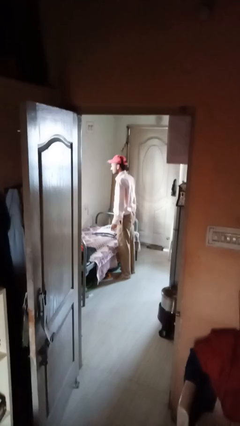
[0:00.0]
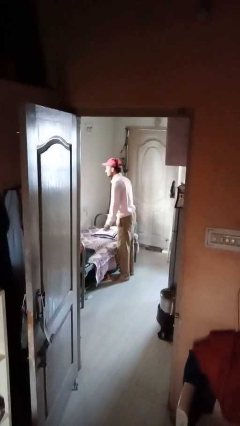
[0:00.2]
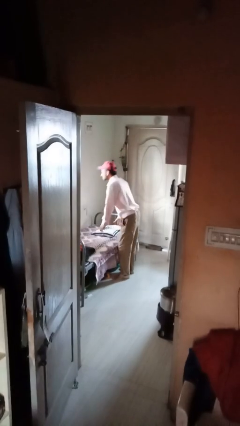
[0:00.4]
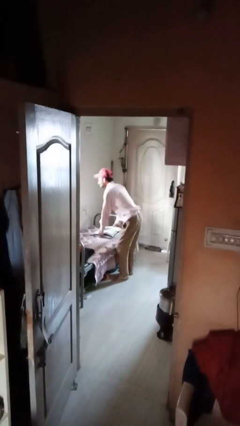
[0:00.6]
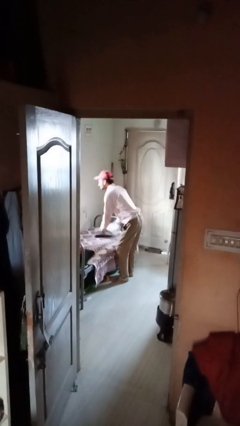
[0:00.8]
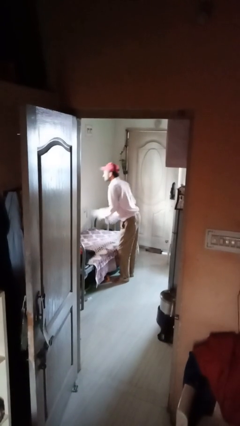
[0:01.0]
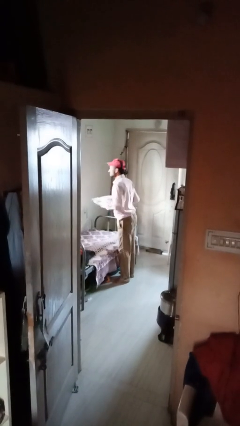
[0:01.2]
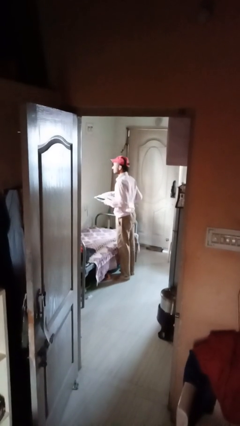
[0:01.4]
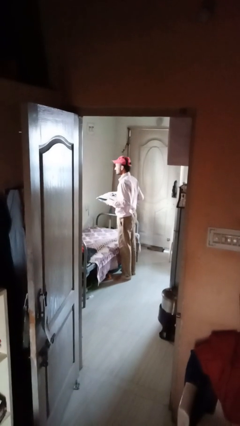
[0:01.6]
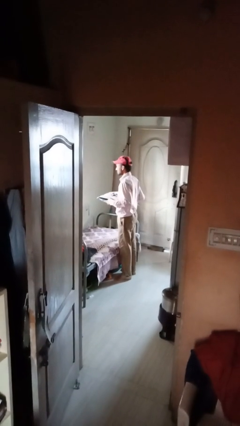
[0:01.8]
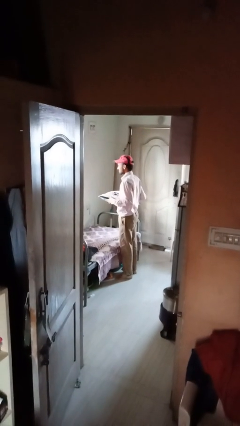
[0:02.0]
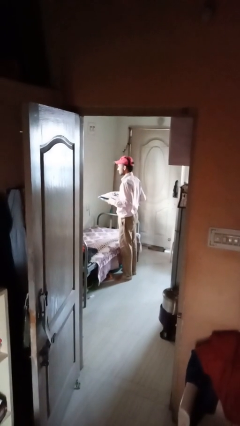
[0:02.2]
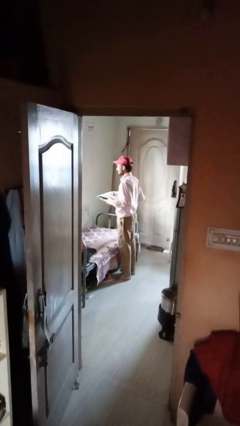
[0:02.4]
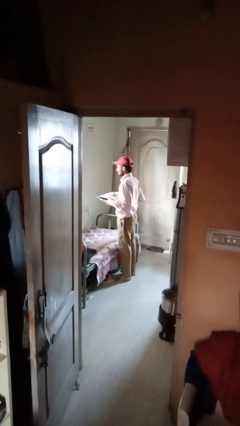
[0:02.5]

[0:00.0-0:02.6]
person picks up object from bed

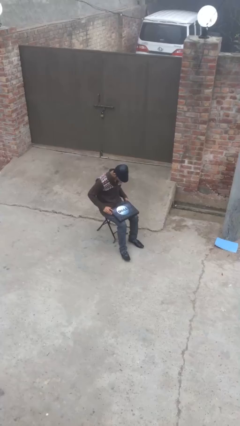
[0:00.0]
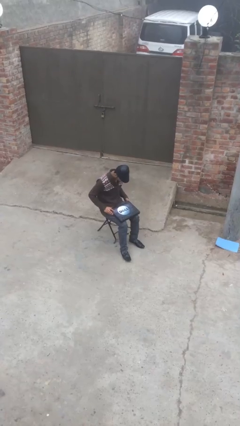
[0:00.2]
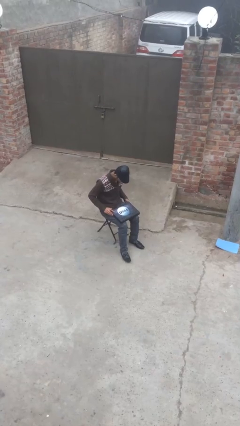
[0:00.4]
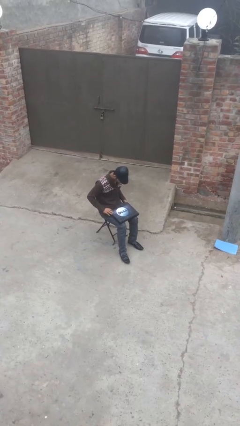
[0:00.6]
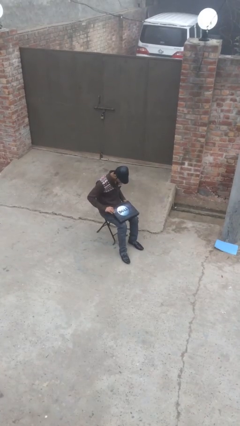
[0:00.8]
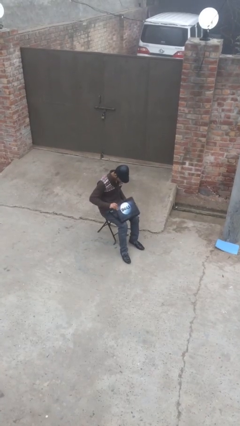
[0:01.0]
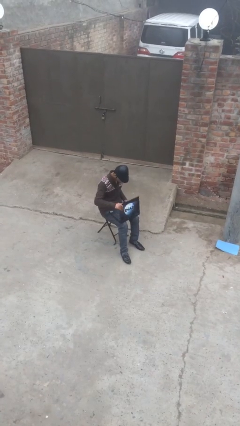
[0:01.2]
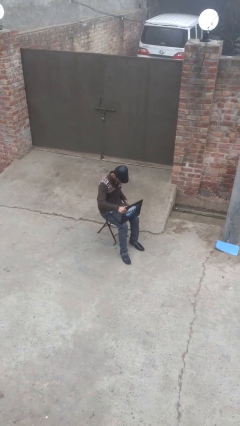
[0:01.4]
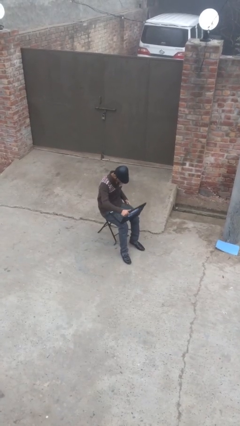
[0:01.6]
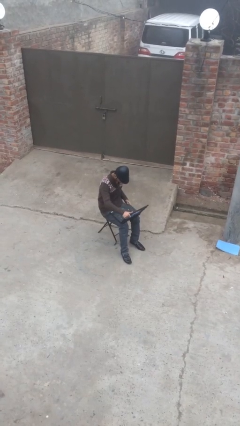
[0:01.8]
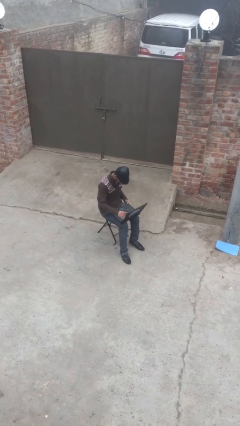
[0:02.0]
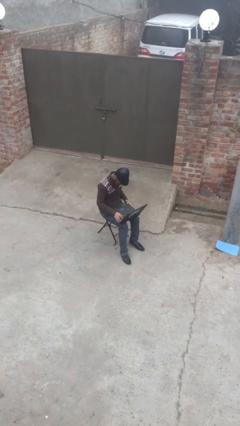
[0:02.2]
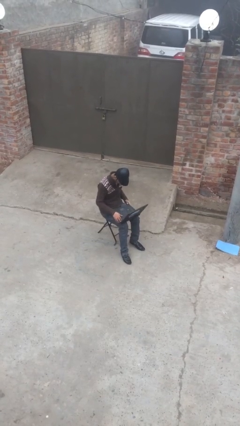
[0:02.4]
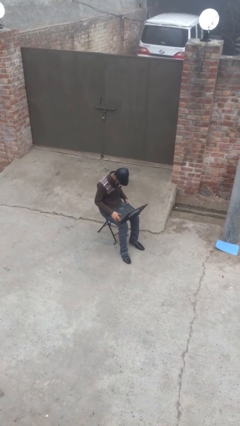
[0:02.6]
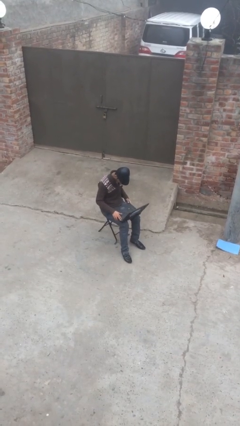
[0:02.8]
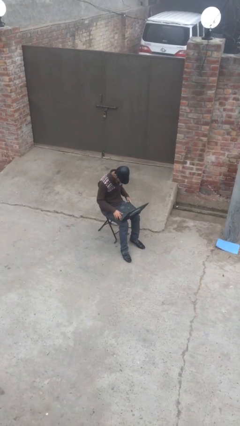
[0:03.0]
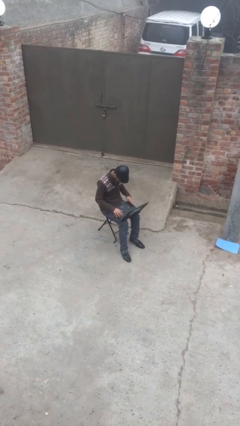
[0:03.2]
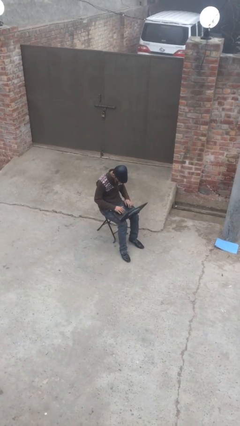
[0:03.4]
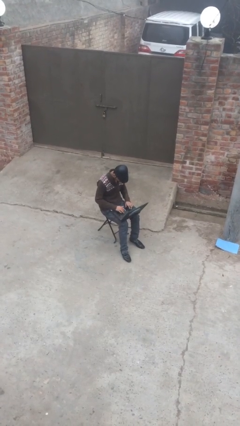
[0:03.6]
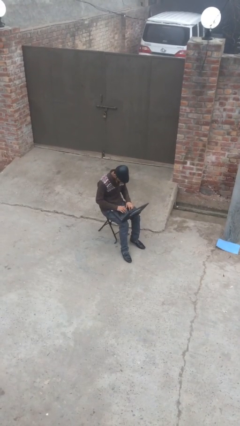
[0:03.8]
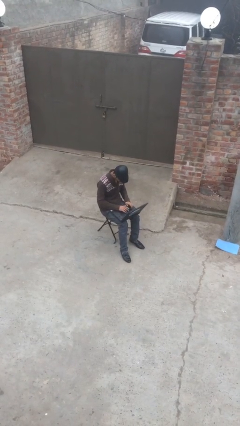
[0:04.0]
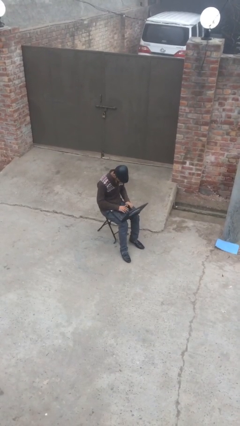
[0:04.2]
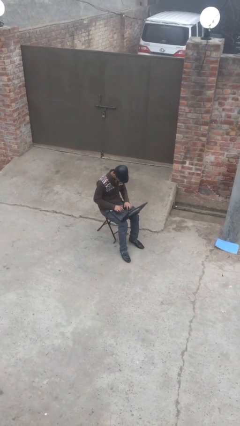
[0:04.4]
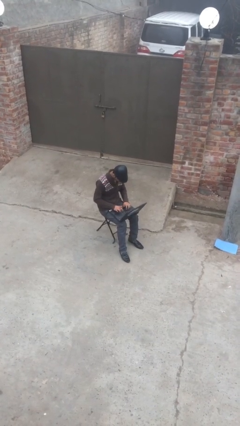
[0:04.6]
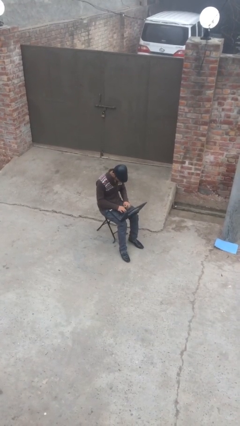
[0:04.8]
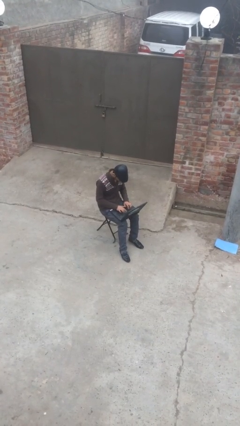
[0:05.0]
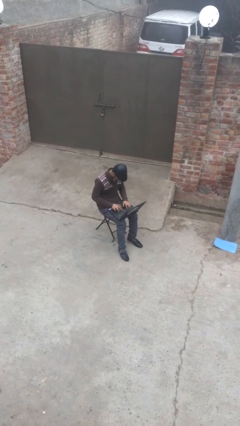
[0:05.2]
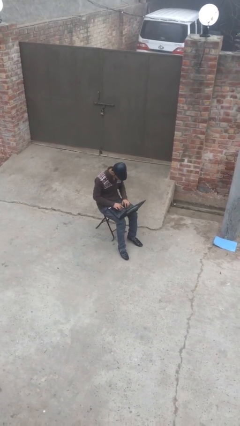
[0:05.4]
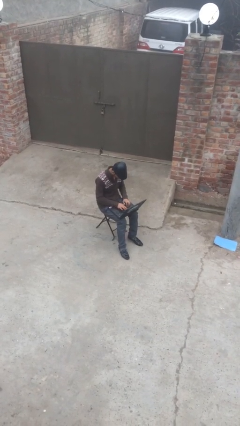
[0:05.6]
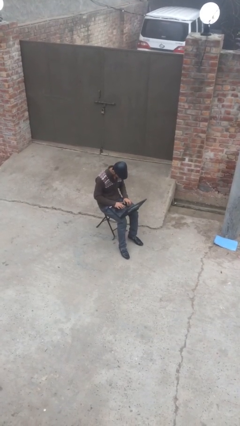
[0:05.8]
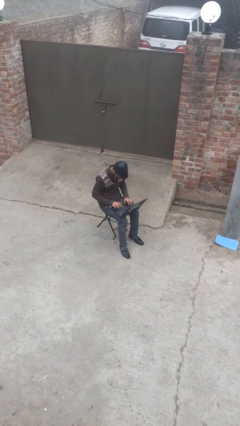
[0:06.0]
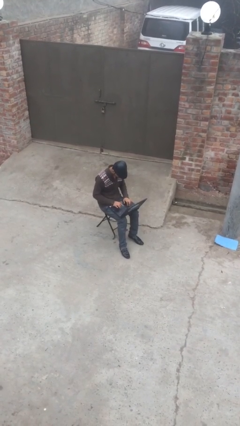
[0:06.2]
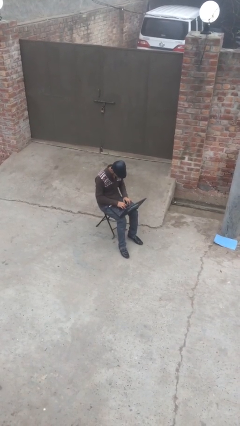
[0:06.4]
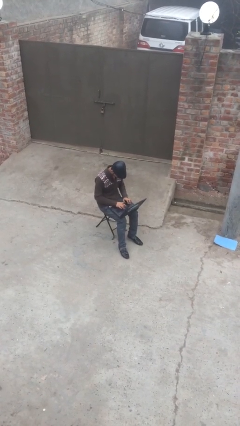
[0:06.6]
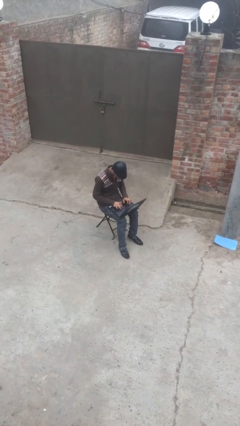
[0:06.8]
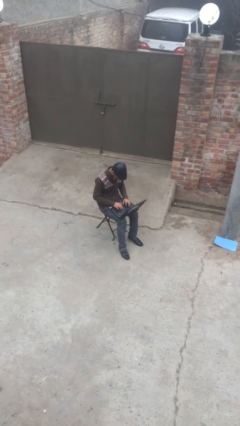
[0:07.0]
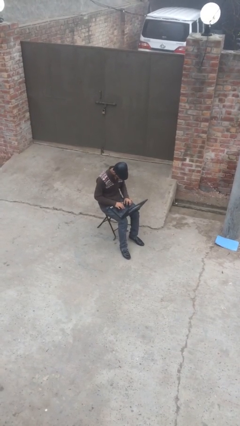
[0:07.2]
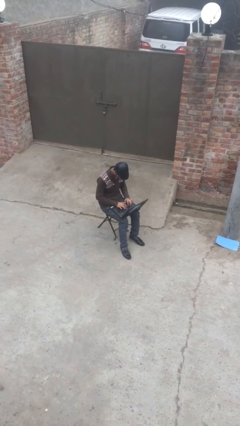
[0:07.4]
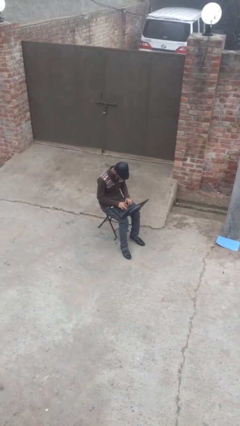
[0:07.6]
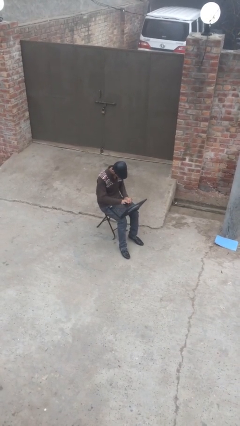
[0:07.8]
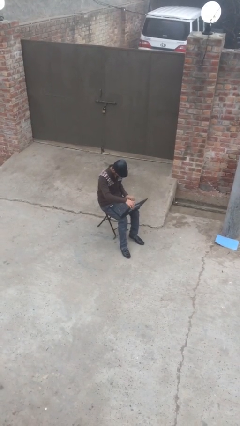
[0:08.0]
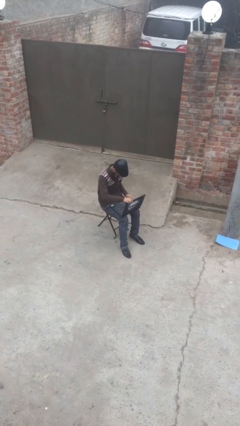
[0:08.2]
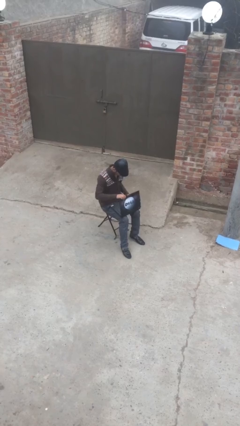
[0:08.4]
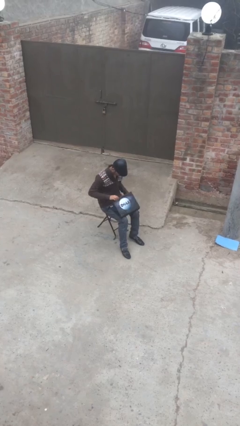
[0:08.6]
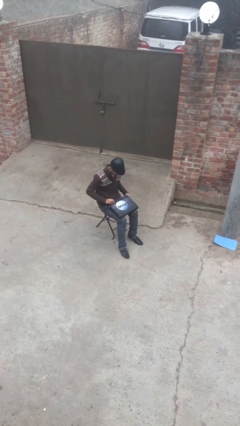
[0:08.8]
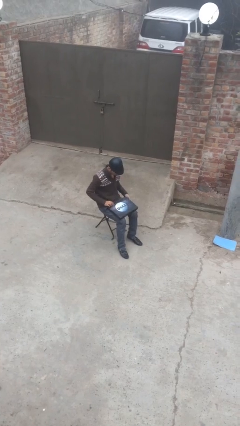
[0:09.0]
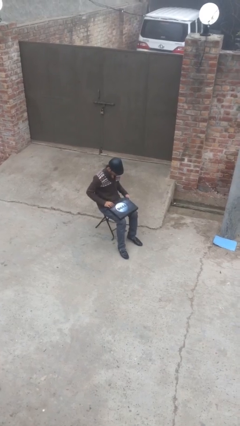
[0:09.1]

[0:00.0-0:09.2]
person interacts with laptop

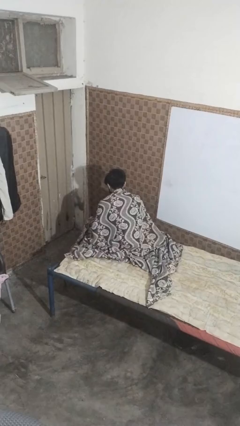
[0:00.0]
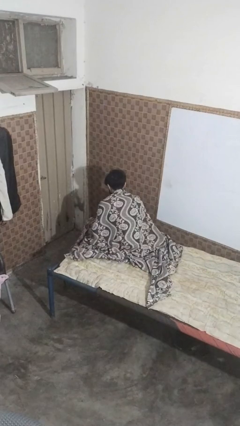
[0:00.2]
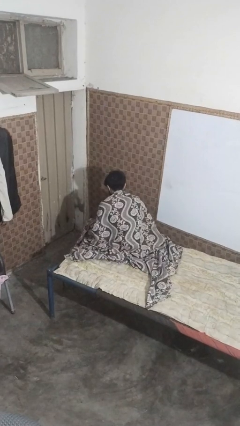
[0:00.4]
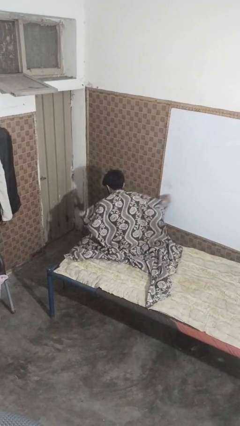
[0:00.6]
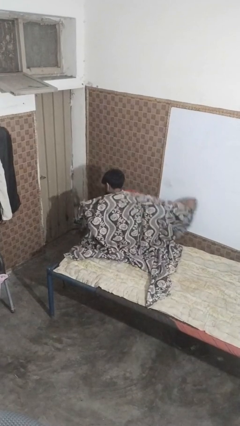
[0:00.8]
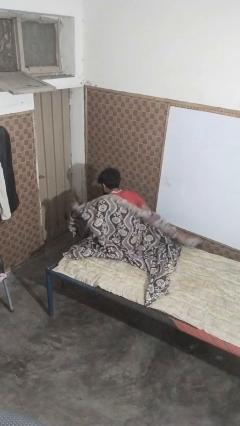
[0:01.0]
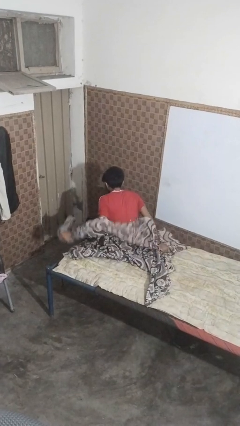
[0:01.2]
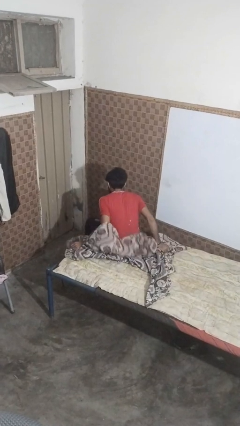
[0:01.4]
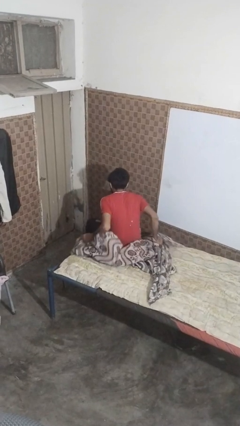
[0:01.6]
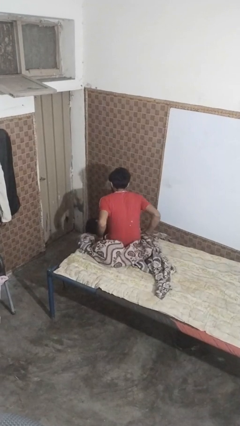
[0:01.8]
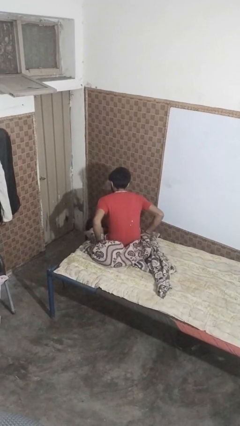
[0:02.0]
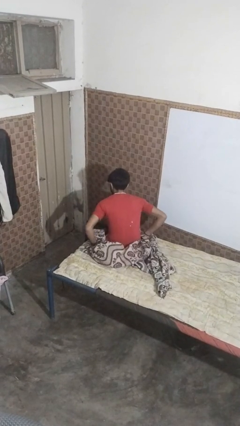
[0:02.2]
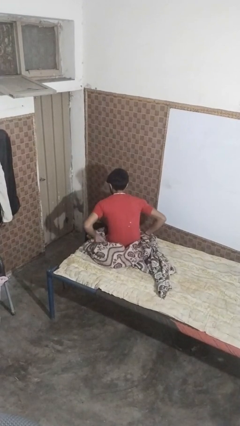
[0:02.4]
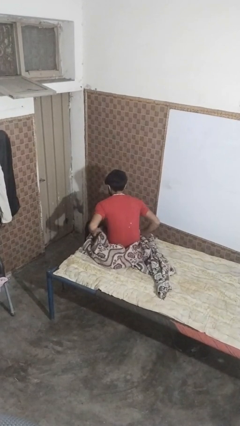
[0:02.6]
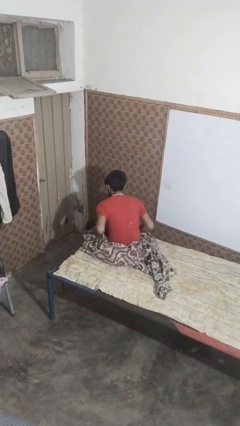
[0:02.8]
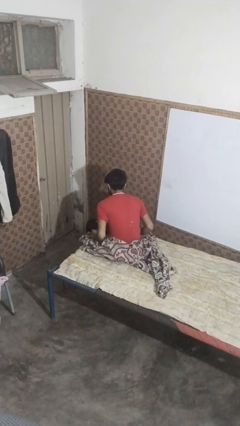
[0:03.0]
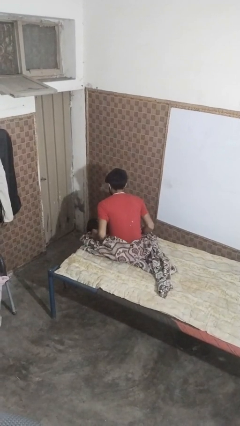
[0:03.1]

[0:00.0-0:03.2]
person uncovers with bedsheets

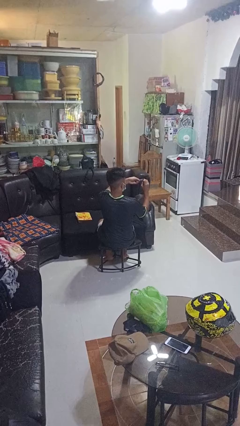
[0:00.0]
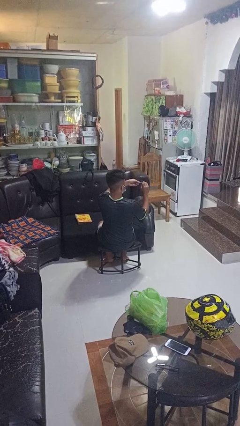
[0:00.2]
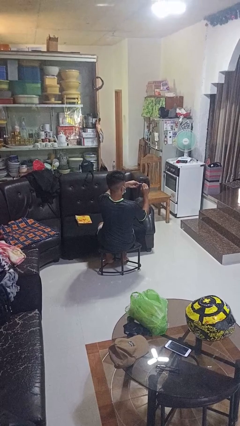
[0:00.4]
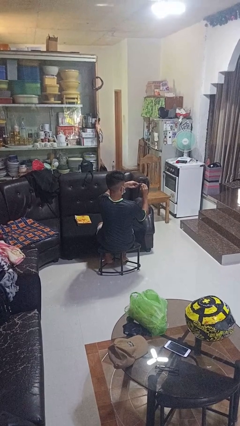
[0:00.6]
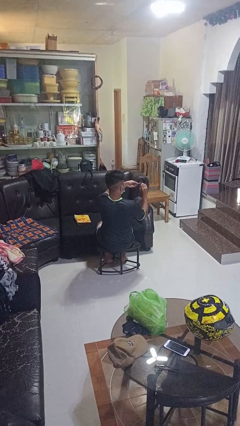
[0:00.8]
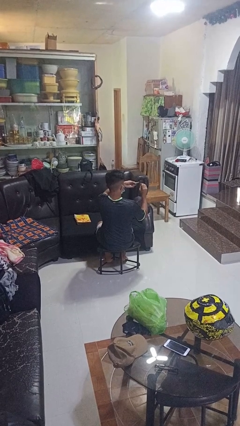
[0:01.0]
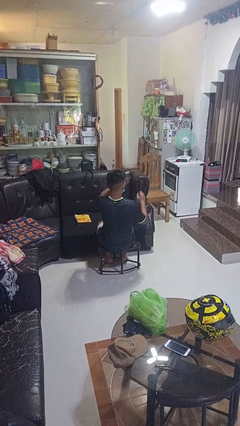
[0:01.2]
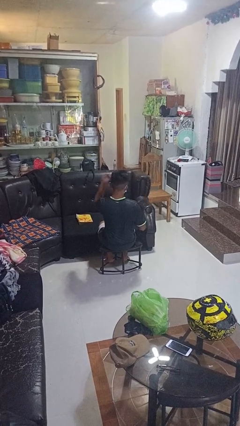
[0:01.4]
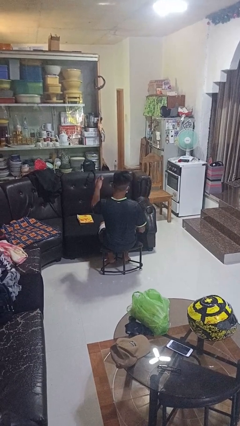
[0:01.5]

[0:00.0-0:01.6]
person clips fingernails

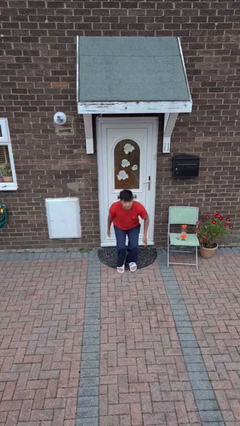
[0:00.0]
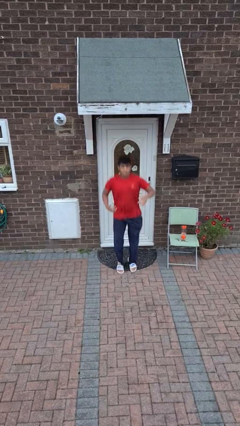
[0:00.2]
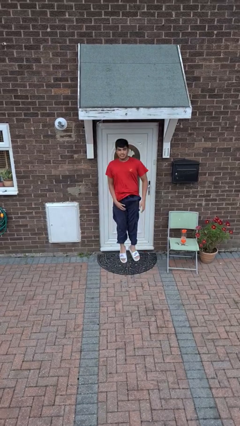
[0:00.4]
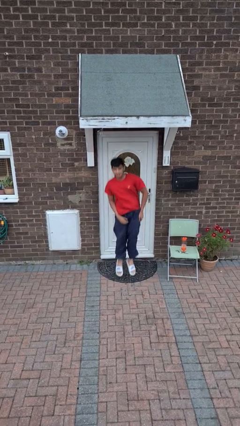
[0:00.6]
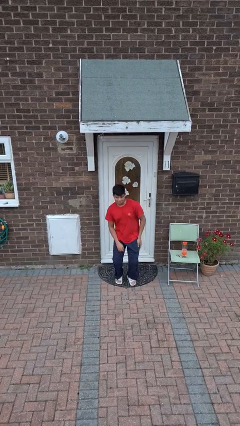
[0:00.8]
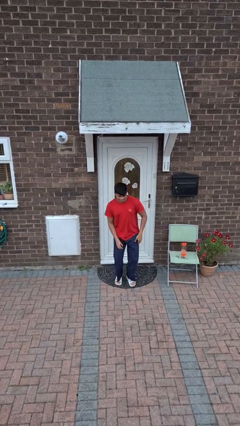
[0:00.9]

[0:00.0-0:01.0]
person jumps

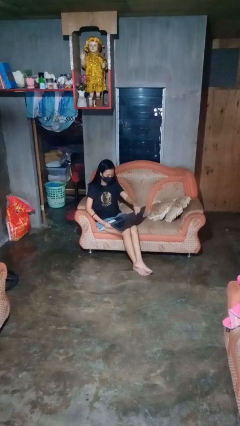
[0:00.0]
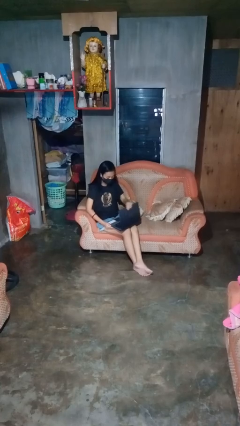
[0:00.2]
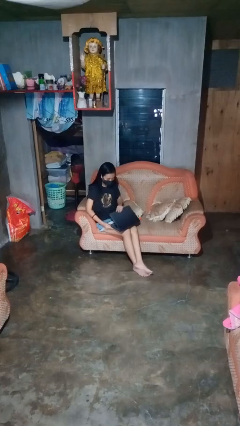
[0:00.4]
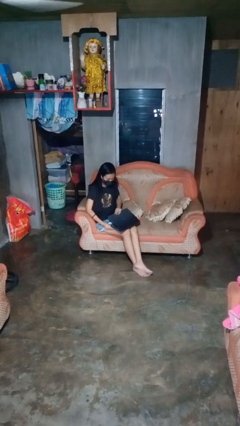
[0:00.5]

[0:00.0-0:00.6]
person closes laptop
